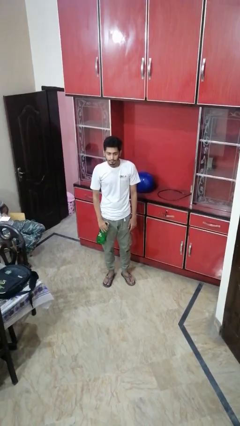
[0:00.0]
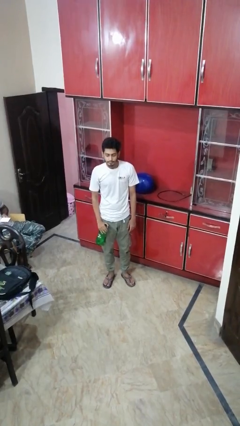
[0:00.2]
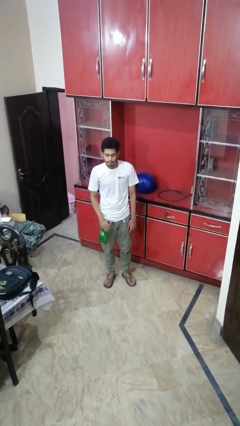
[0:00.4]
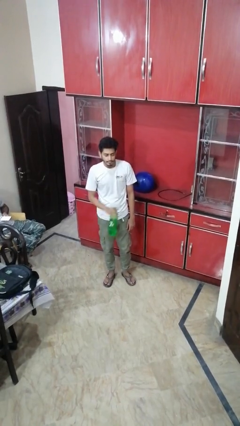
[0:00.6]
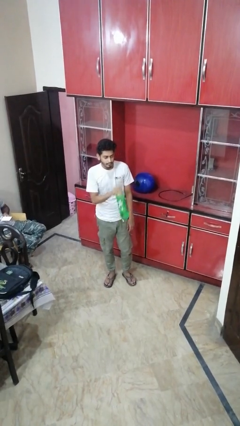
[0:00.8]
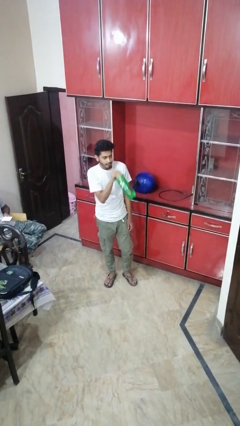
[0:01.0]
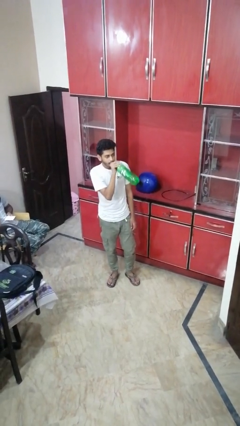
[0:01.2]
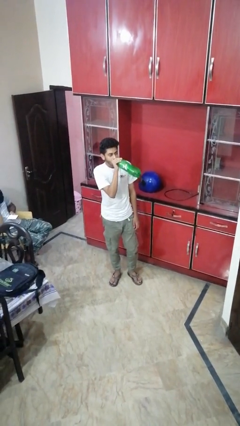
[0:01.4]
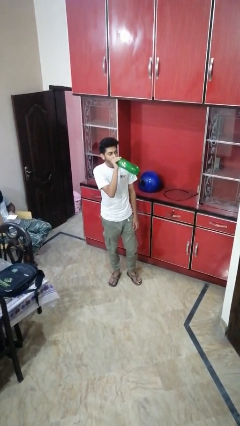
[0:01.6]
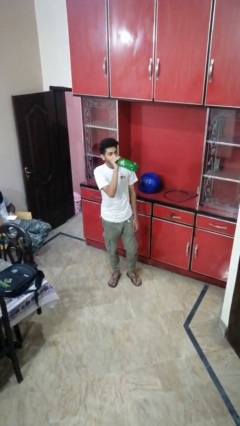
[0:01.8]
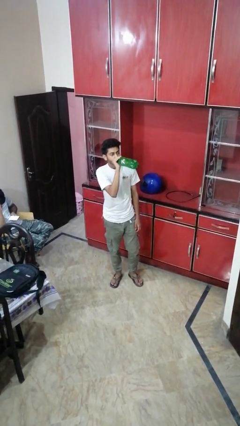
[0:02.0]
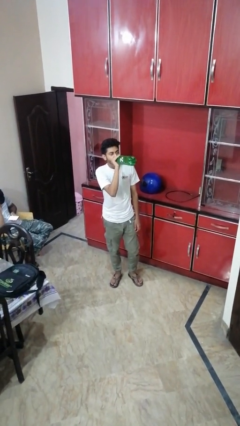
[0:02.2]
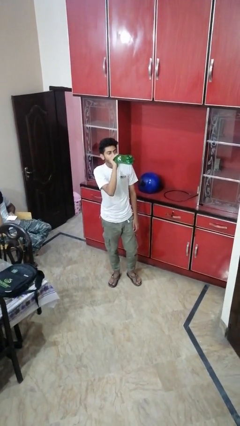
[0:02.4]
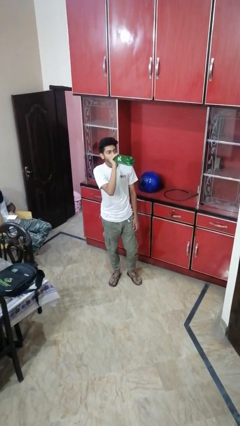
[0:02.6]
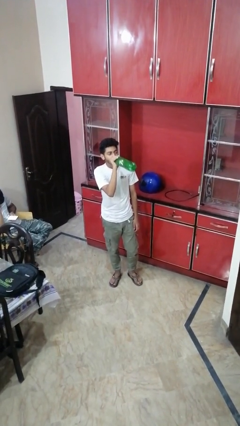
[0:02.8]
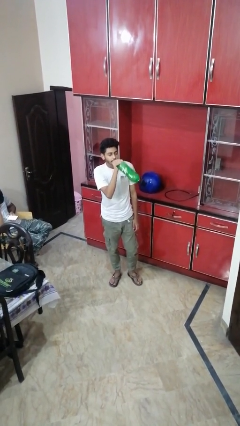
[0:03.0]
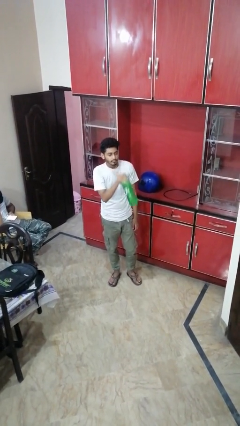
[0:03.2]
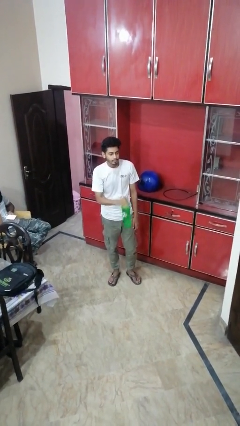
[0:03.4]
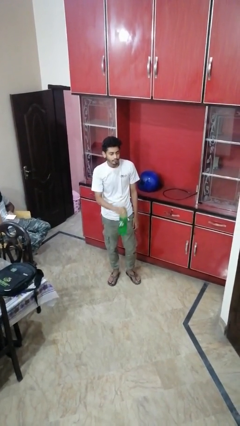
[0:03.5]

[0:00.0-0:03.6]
person drinks from bottle

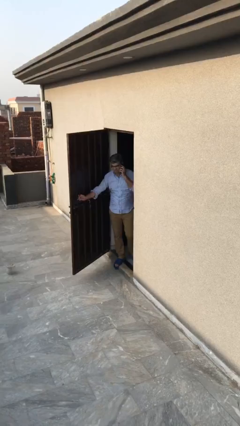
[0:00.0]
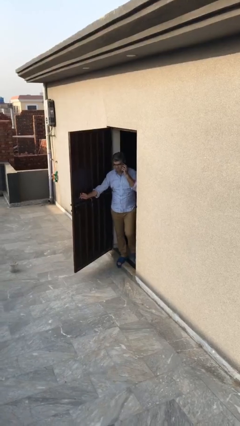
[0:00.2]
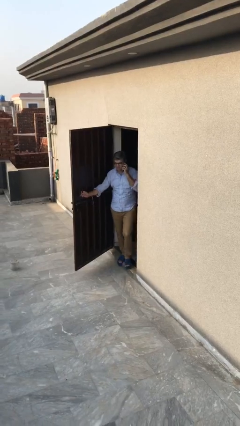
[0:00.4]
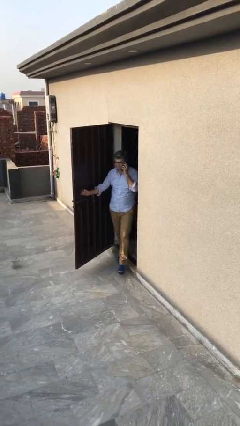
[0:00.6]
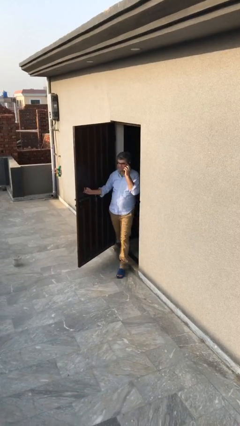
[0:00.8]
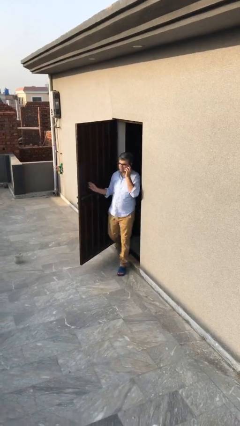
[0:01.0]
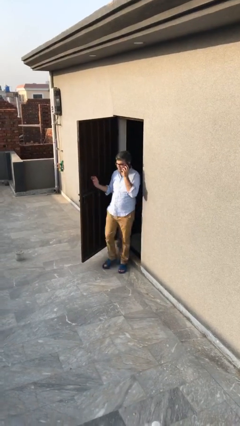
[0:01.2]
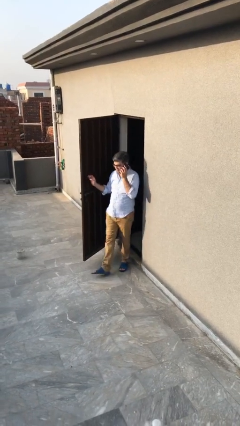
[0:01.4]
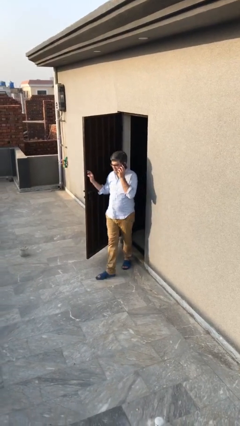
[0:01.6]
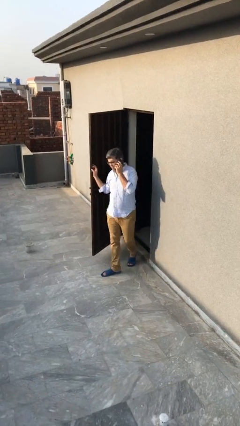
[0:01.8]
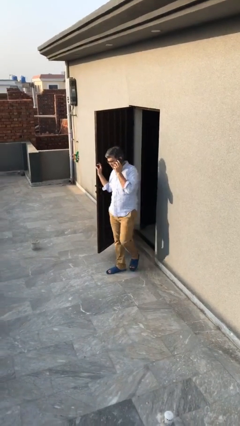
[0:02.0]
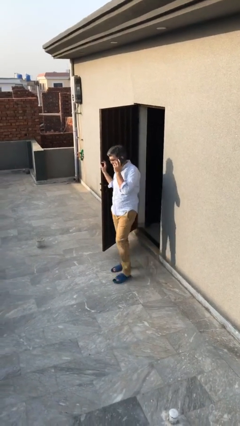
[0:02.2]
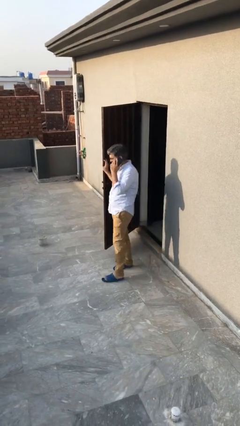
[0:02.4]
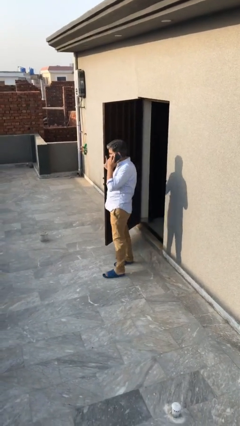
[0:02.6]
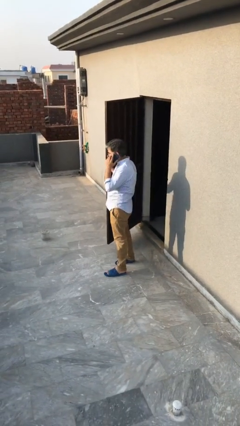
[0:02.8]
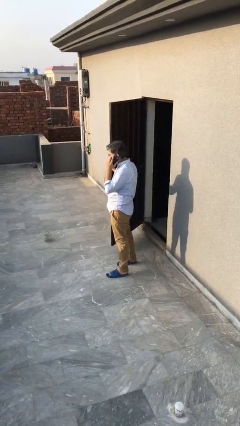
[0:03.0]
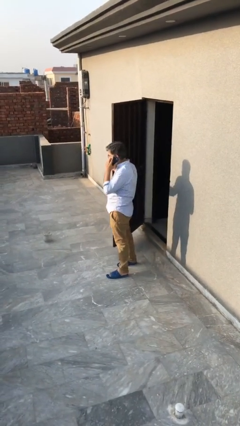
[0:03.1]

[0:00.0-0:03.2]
person enters scene through structure

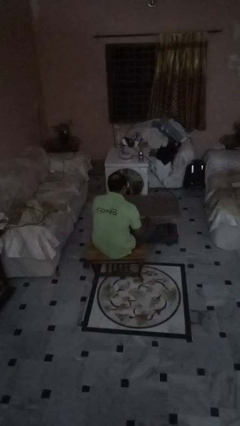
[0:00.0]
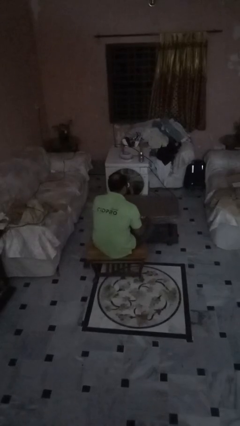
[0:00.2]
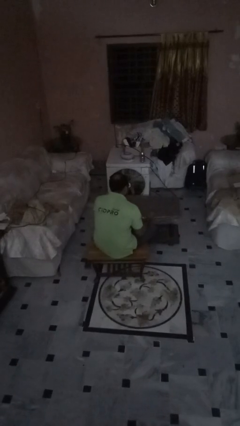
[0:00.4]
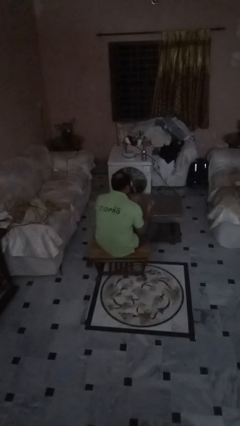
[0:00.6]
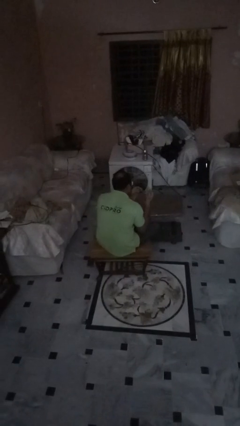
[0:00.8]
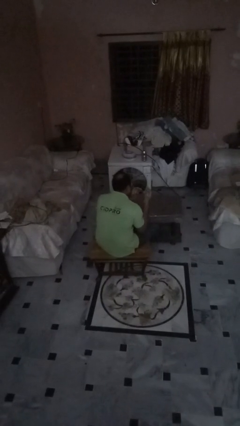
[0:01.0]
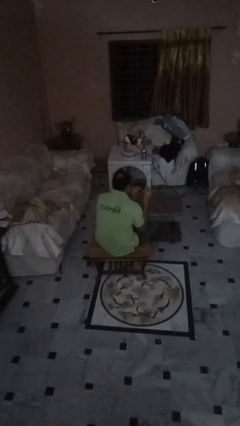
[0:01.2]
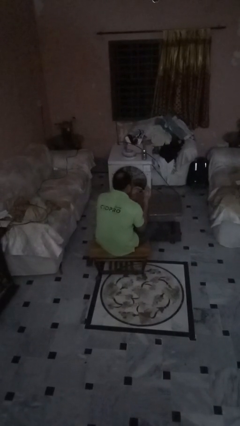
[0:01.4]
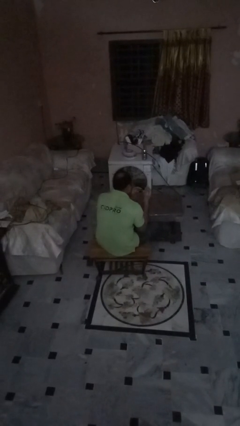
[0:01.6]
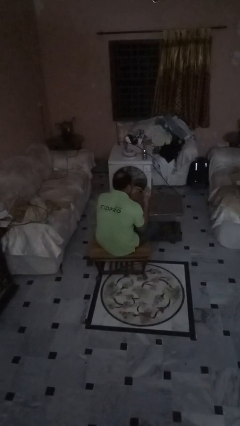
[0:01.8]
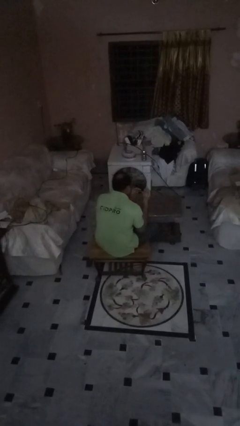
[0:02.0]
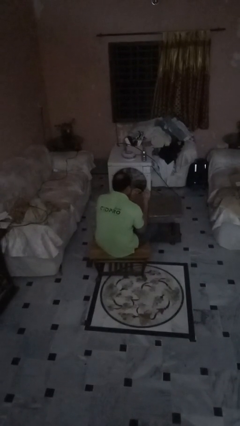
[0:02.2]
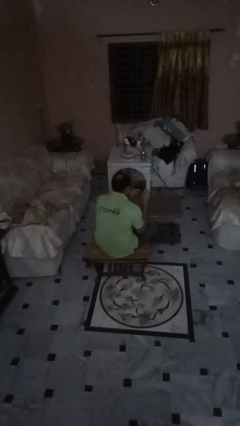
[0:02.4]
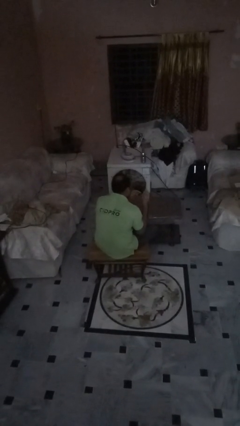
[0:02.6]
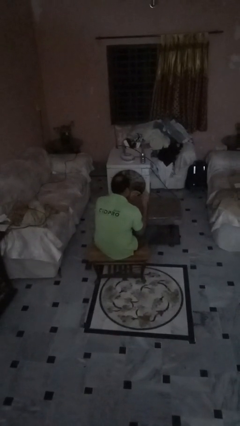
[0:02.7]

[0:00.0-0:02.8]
person clips fingernails

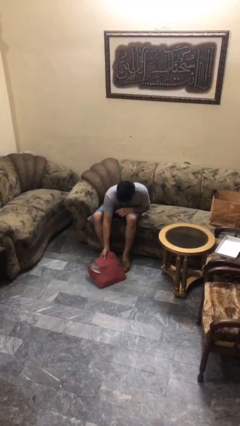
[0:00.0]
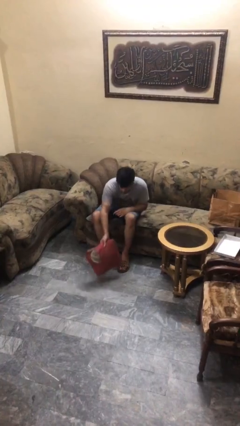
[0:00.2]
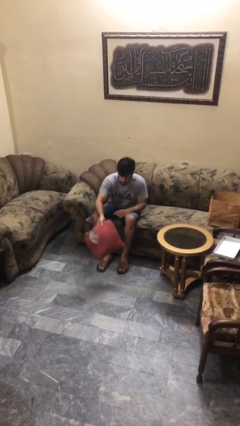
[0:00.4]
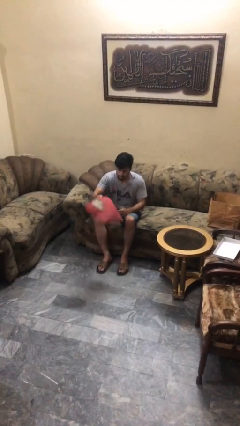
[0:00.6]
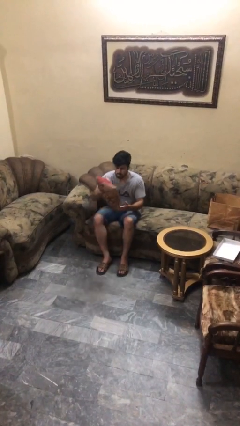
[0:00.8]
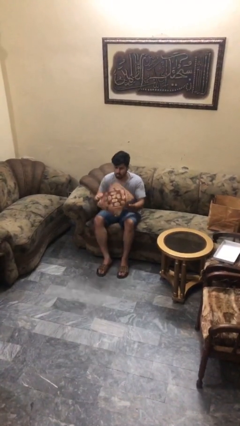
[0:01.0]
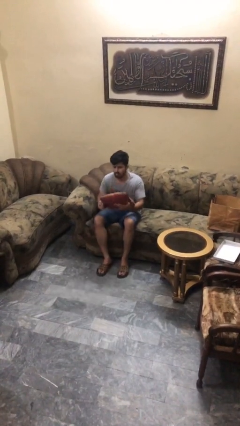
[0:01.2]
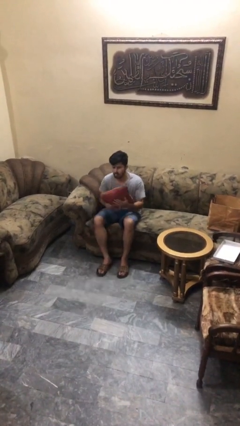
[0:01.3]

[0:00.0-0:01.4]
person picks up object from floor

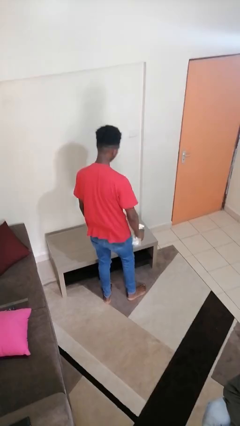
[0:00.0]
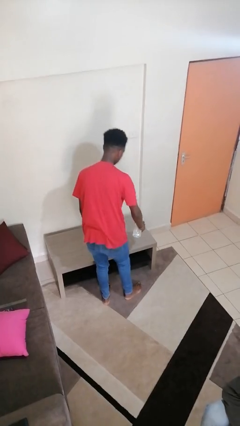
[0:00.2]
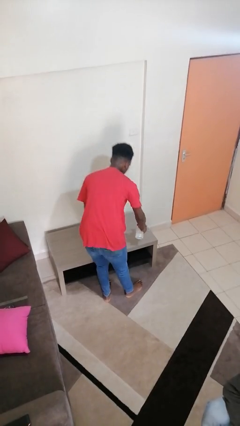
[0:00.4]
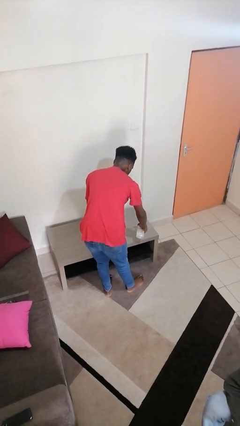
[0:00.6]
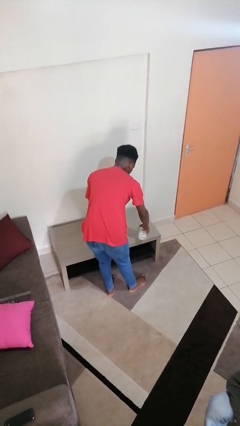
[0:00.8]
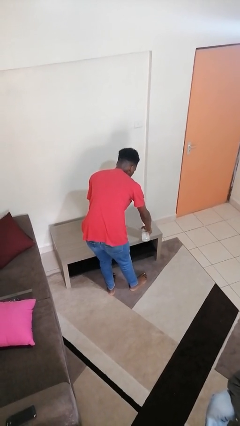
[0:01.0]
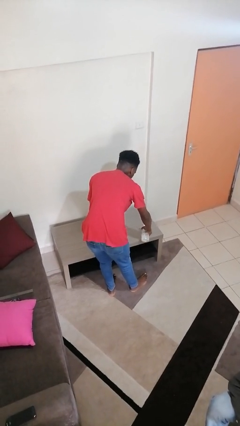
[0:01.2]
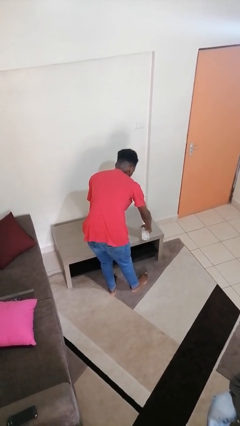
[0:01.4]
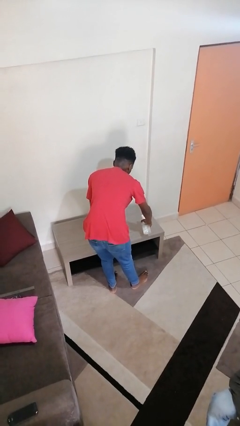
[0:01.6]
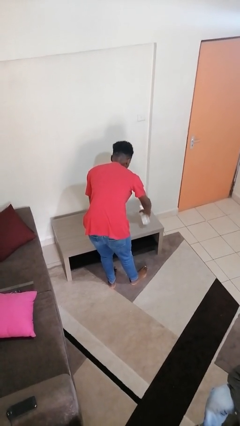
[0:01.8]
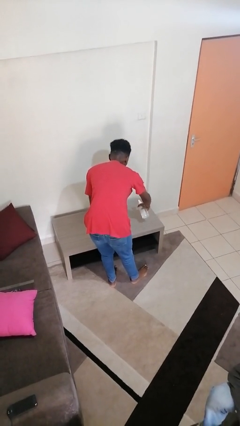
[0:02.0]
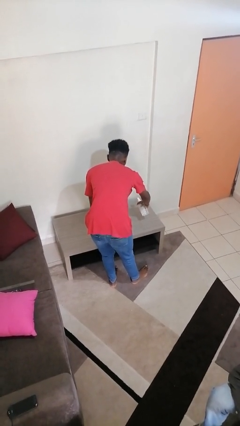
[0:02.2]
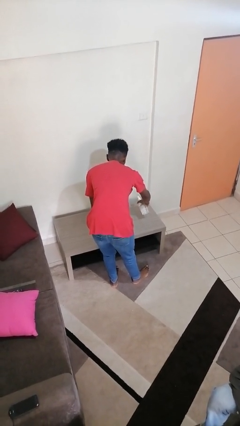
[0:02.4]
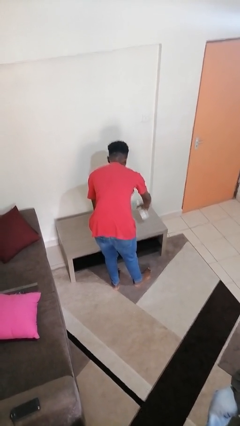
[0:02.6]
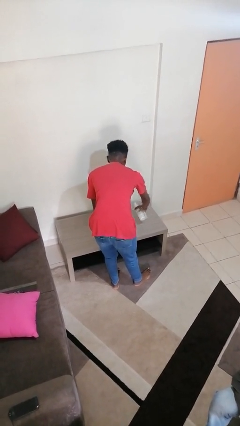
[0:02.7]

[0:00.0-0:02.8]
person sprays from bottle

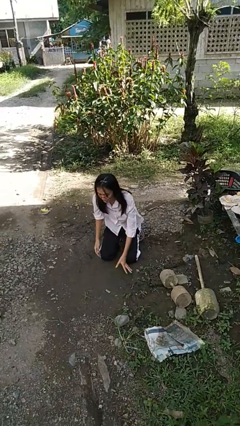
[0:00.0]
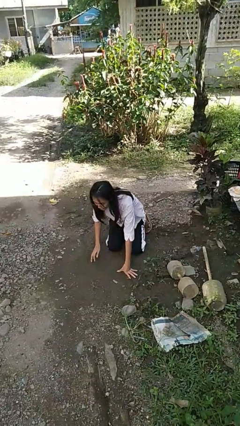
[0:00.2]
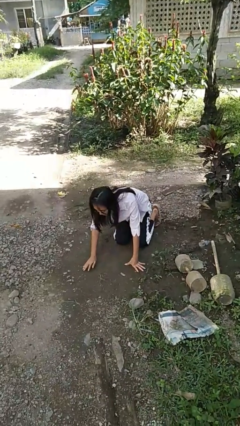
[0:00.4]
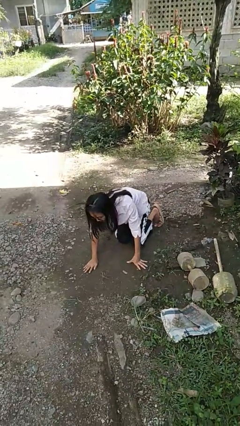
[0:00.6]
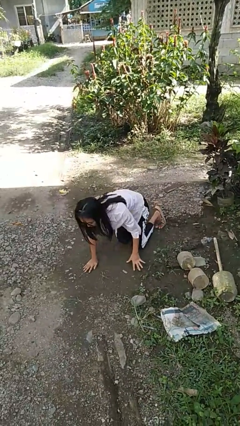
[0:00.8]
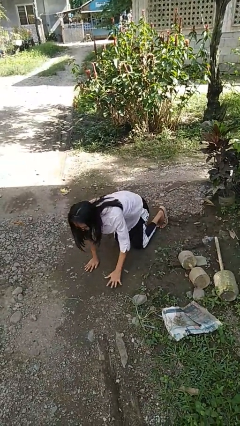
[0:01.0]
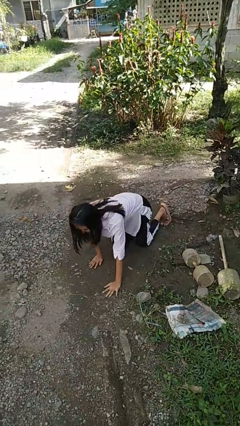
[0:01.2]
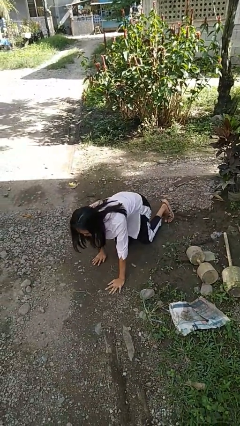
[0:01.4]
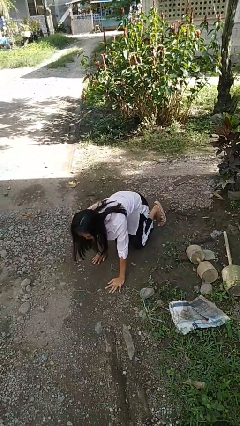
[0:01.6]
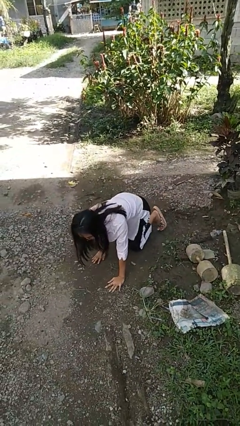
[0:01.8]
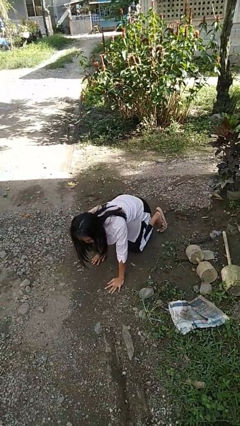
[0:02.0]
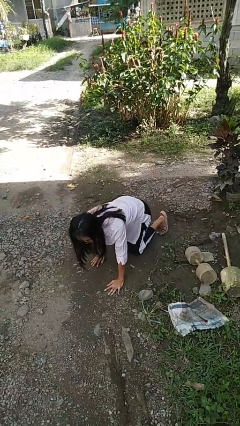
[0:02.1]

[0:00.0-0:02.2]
person crawls

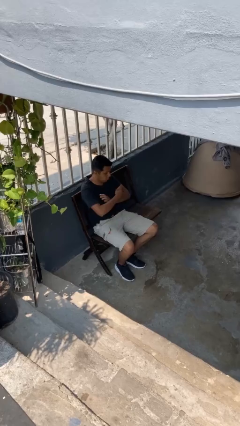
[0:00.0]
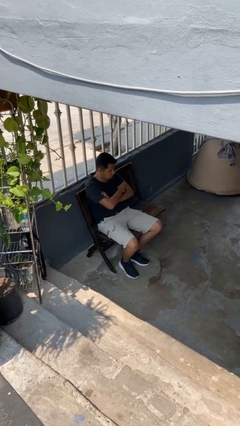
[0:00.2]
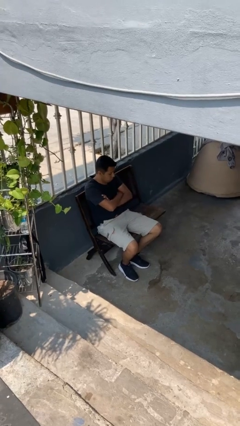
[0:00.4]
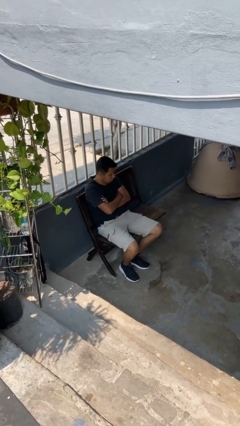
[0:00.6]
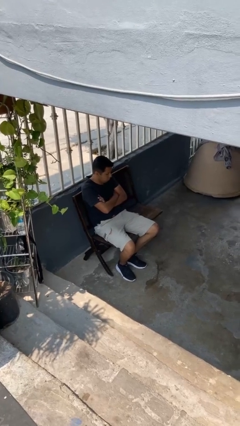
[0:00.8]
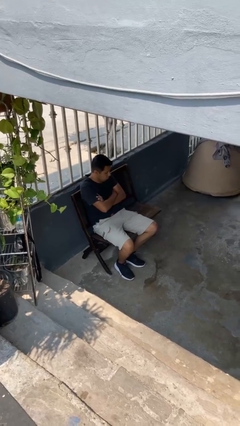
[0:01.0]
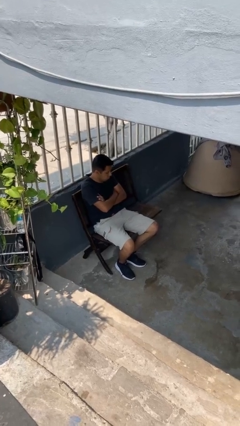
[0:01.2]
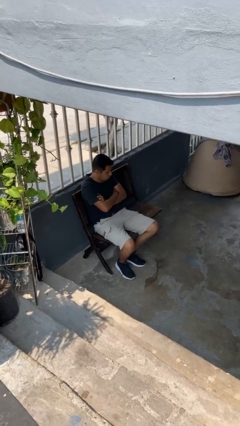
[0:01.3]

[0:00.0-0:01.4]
person crosses arms
